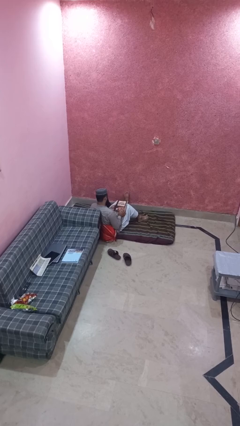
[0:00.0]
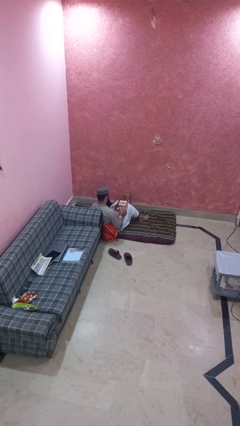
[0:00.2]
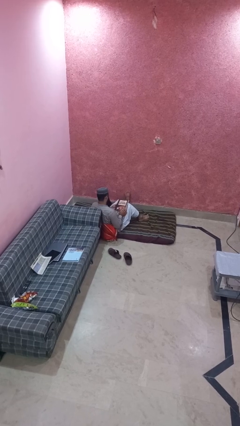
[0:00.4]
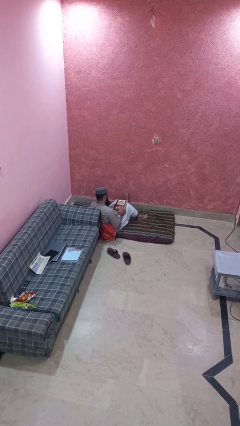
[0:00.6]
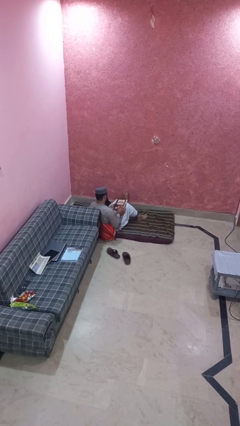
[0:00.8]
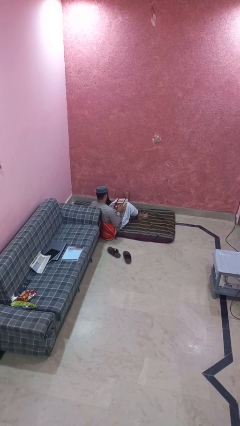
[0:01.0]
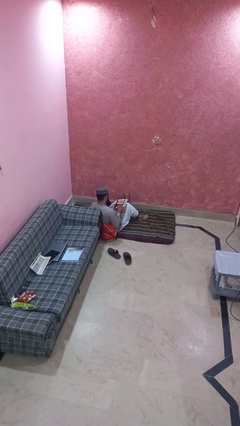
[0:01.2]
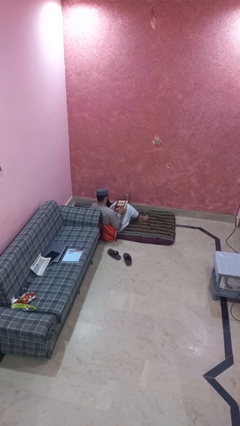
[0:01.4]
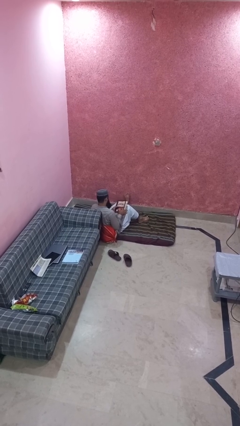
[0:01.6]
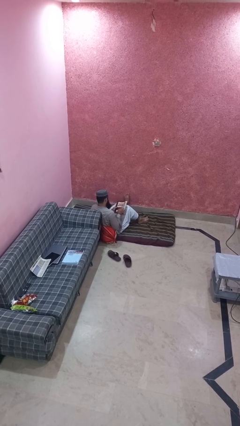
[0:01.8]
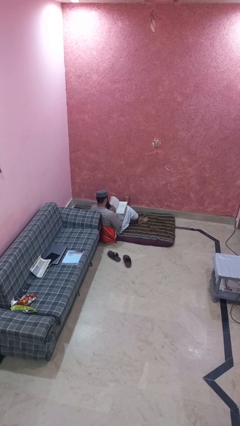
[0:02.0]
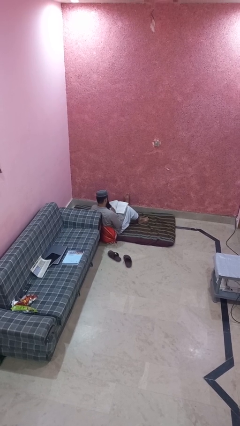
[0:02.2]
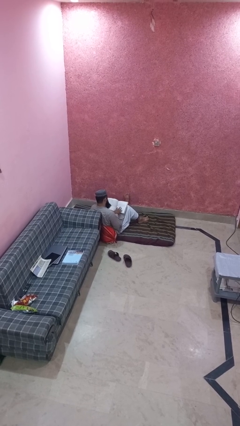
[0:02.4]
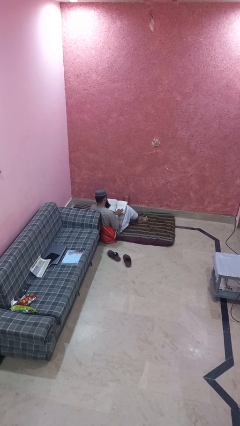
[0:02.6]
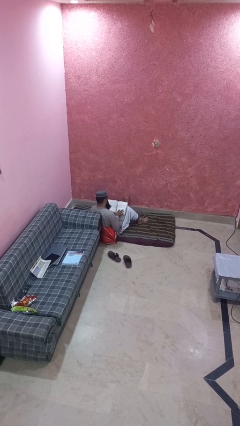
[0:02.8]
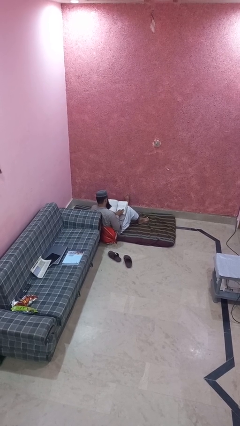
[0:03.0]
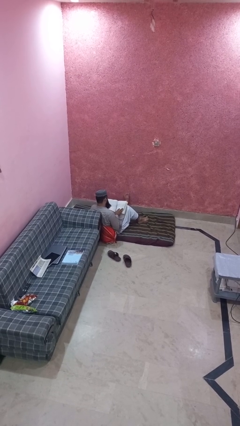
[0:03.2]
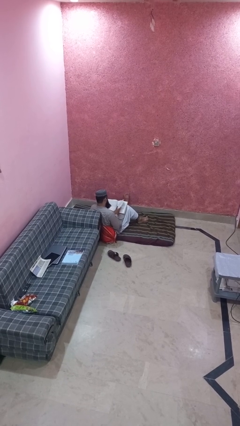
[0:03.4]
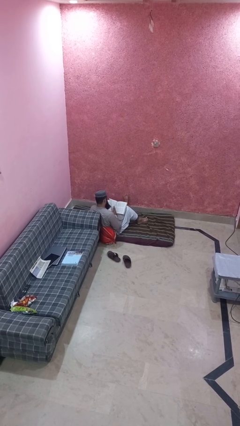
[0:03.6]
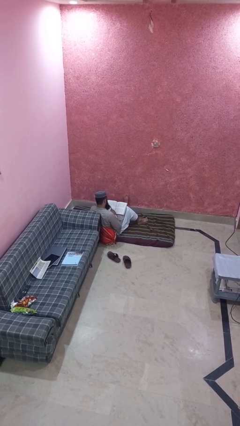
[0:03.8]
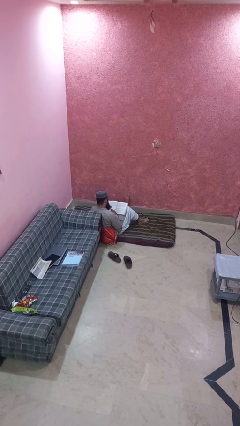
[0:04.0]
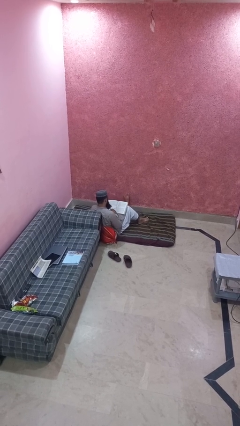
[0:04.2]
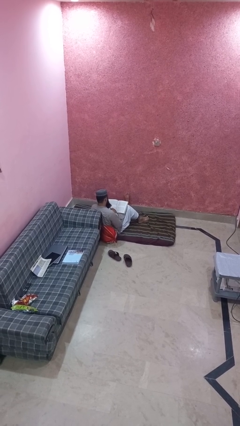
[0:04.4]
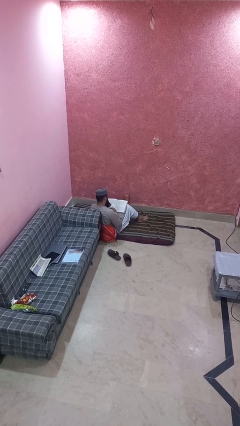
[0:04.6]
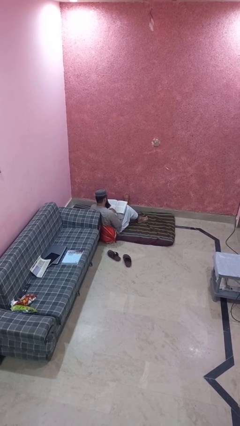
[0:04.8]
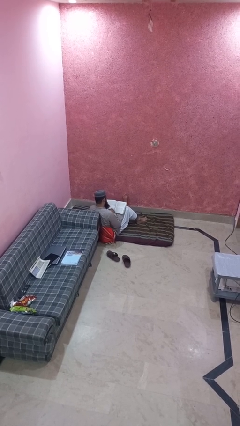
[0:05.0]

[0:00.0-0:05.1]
person reads book

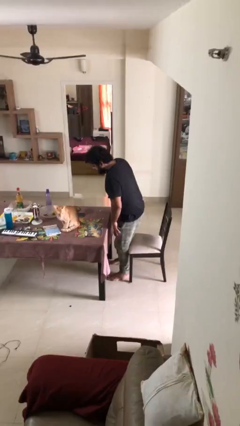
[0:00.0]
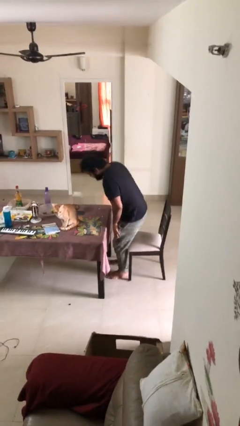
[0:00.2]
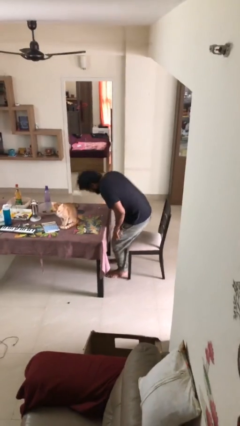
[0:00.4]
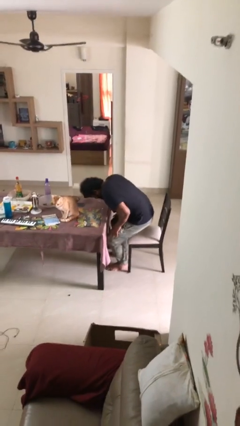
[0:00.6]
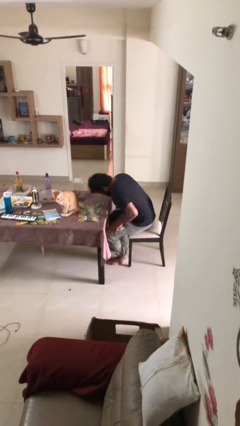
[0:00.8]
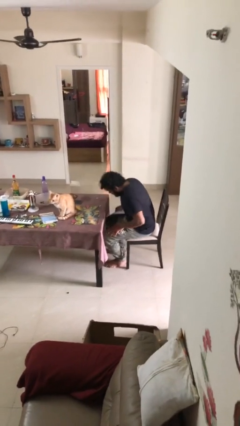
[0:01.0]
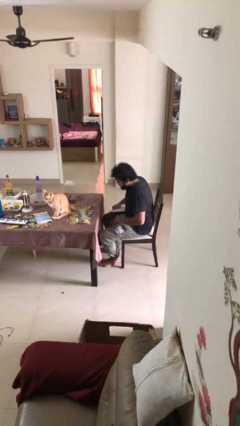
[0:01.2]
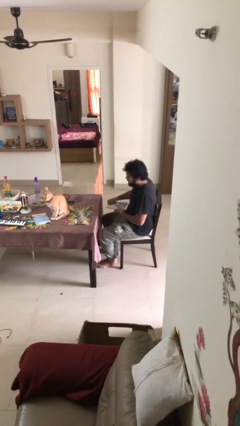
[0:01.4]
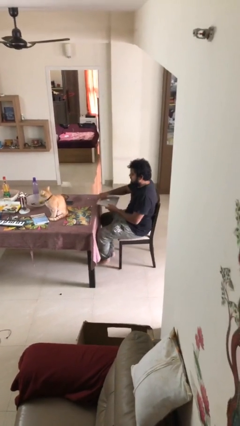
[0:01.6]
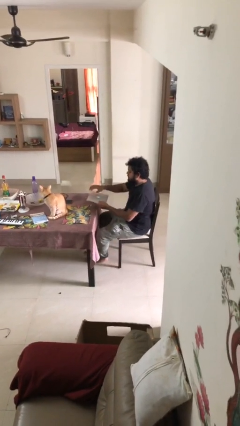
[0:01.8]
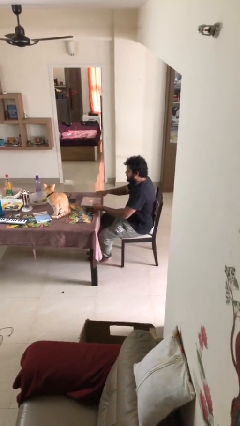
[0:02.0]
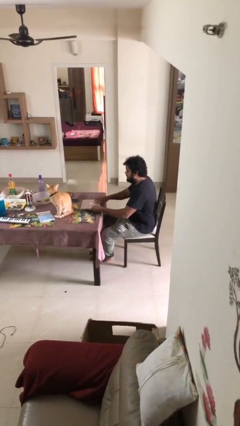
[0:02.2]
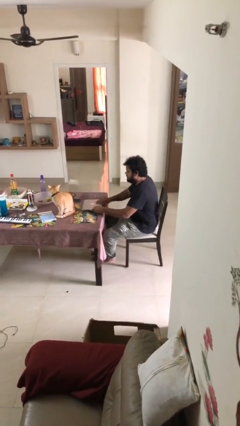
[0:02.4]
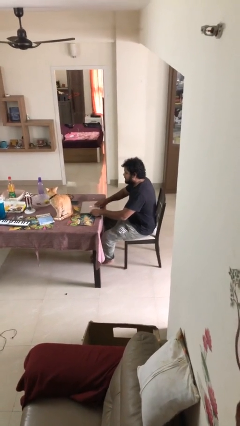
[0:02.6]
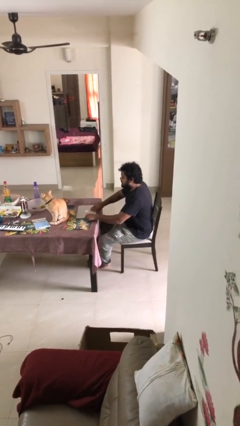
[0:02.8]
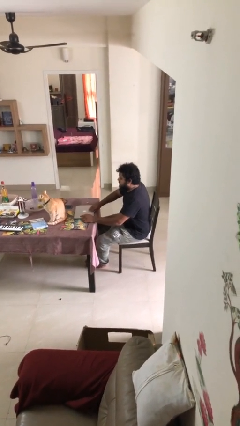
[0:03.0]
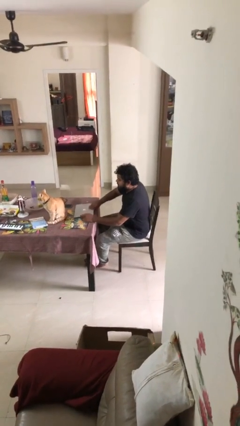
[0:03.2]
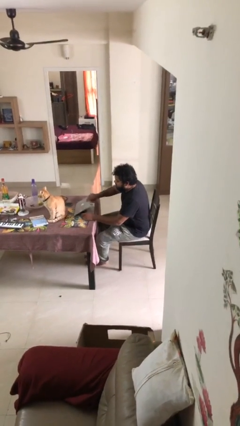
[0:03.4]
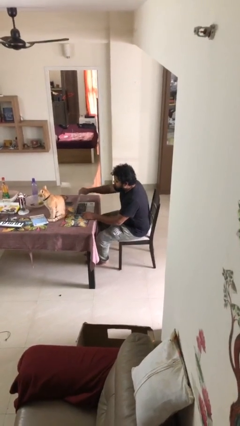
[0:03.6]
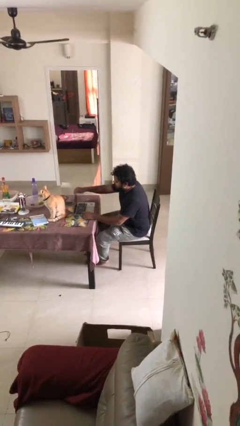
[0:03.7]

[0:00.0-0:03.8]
person sits down

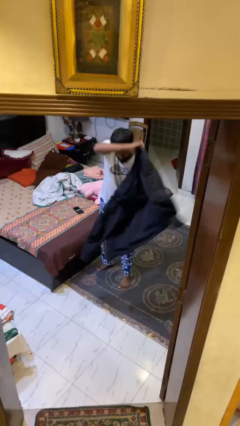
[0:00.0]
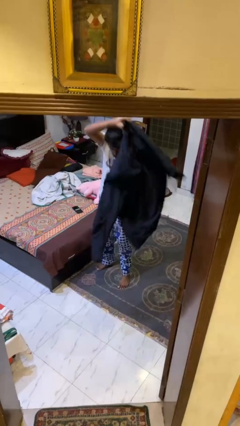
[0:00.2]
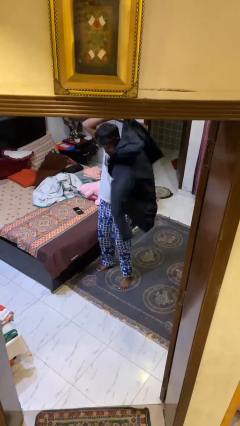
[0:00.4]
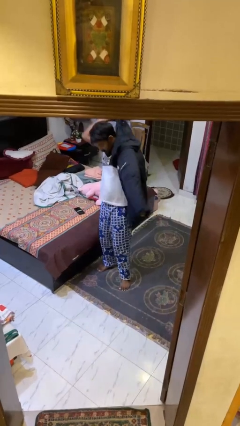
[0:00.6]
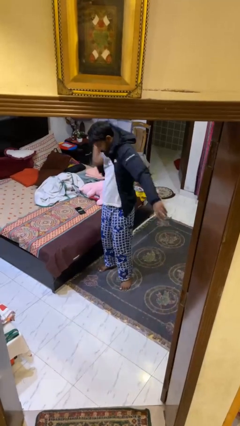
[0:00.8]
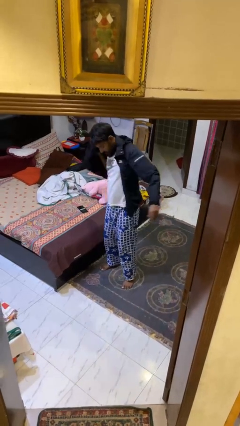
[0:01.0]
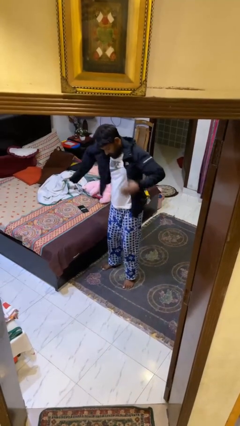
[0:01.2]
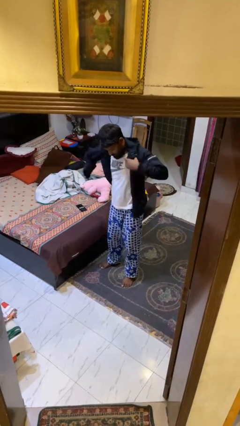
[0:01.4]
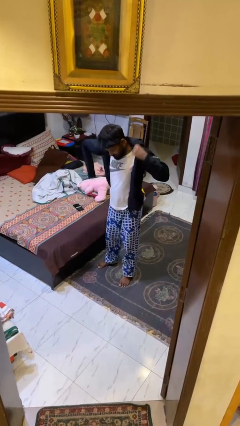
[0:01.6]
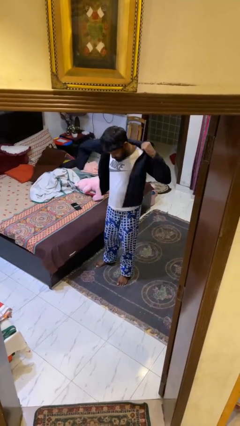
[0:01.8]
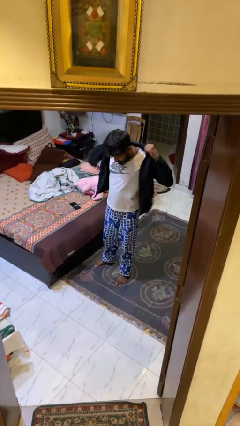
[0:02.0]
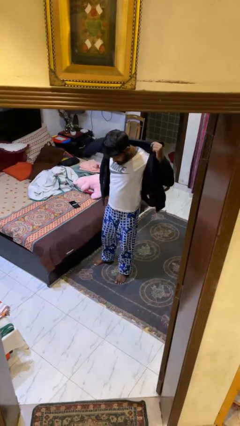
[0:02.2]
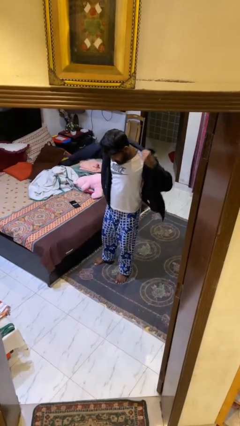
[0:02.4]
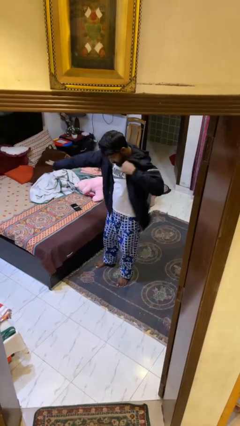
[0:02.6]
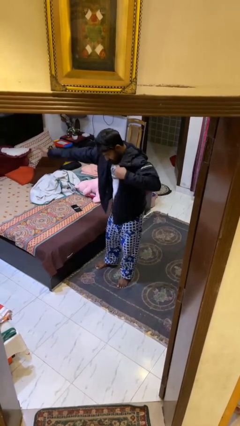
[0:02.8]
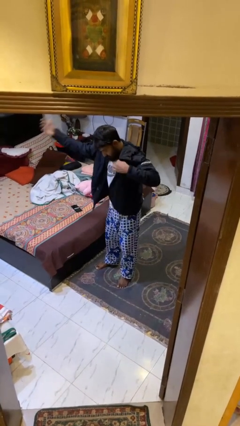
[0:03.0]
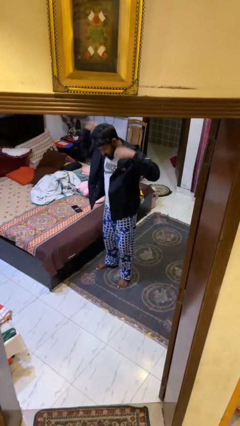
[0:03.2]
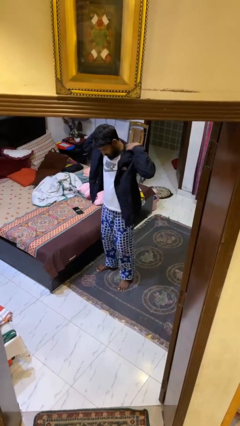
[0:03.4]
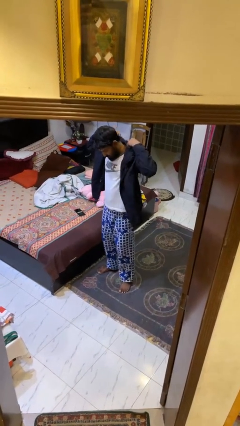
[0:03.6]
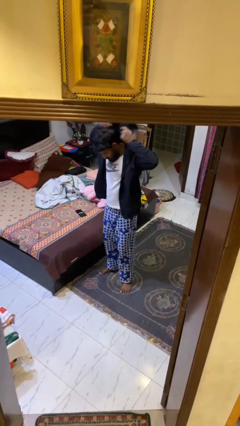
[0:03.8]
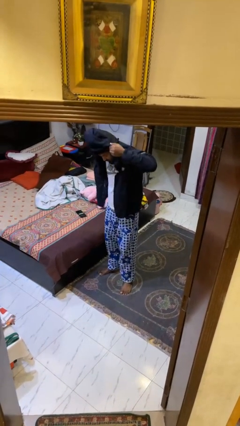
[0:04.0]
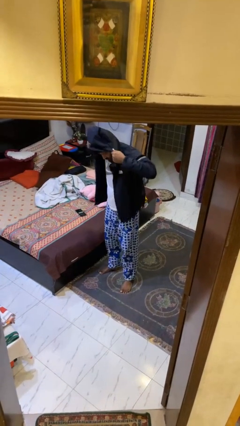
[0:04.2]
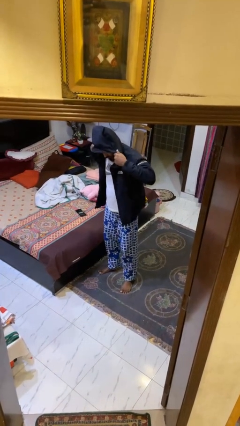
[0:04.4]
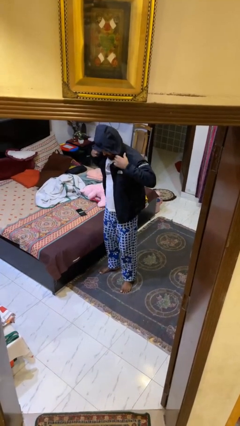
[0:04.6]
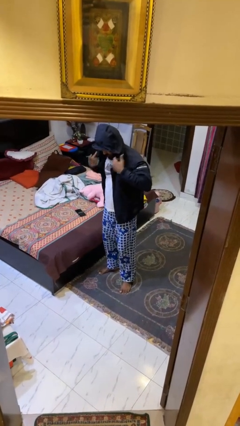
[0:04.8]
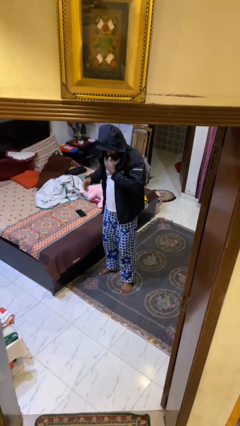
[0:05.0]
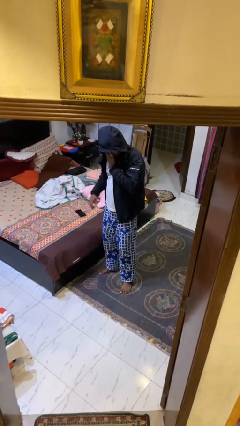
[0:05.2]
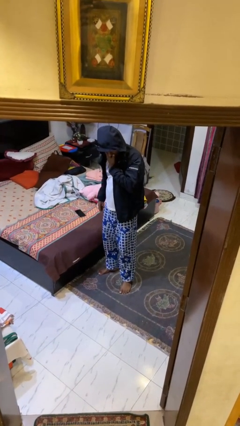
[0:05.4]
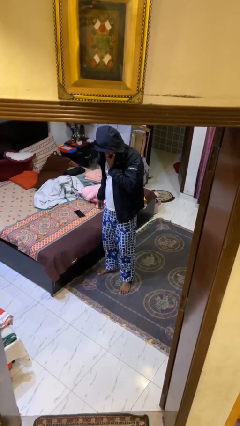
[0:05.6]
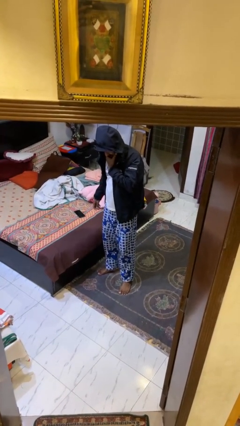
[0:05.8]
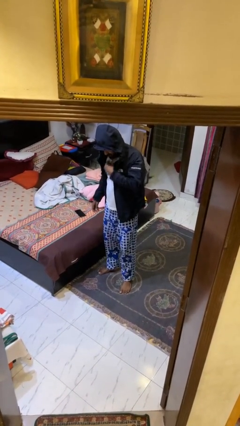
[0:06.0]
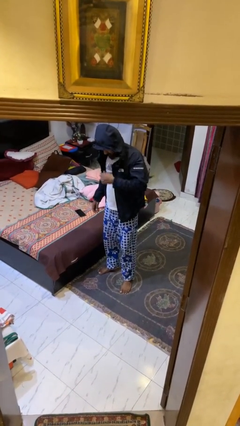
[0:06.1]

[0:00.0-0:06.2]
person puts on hoodie

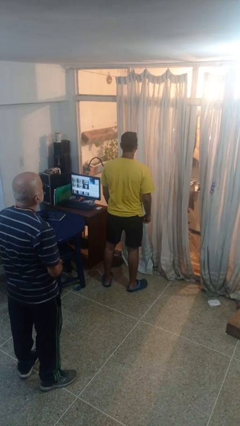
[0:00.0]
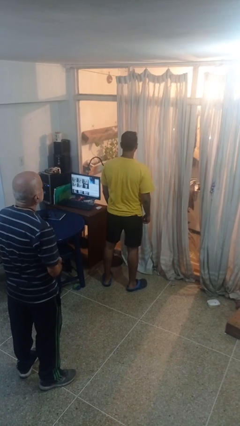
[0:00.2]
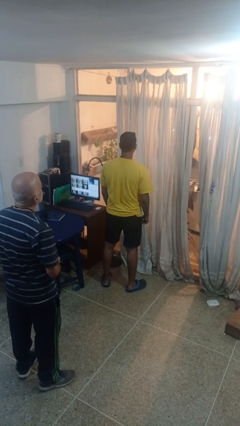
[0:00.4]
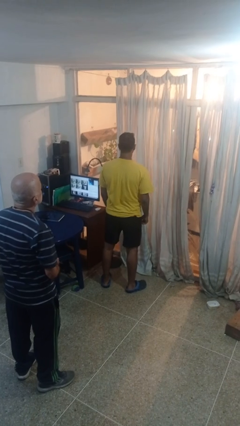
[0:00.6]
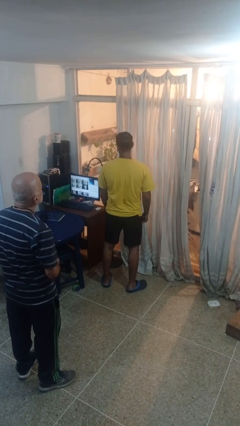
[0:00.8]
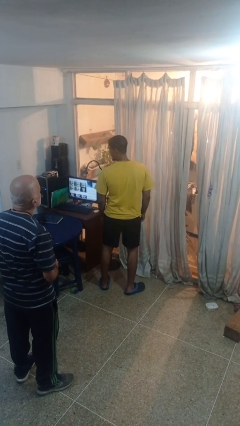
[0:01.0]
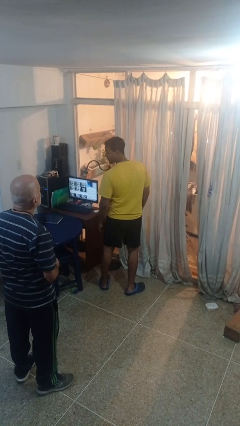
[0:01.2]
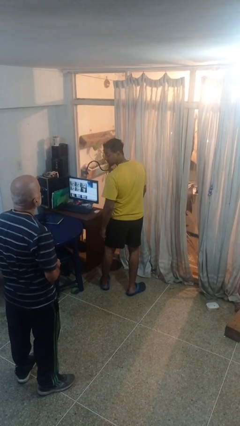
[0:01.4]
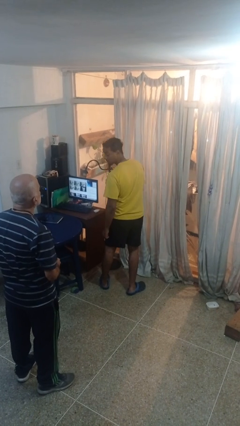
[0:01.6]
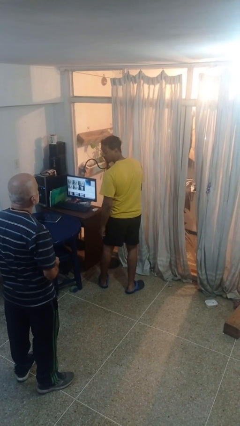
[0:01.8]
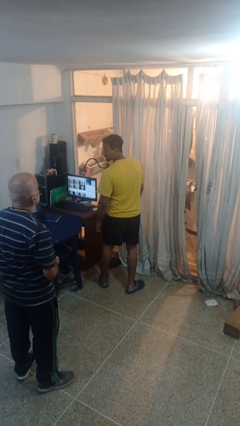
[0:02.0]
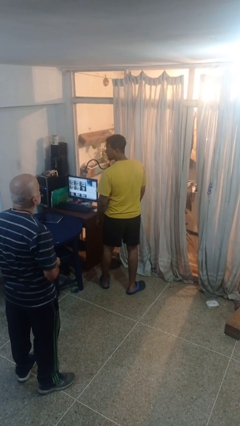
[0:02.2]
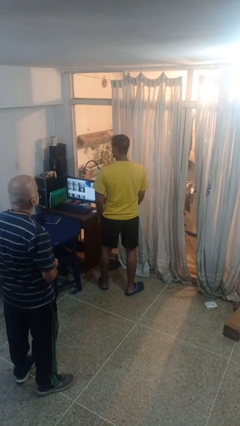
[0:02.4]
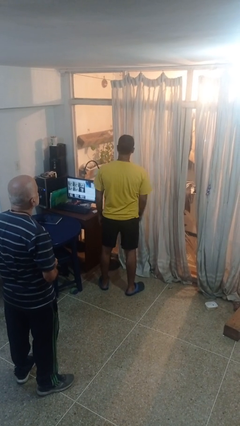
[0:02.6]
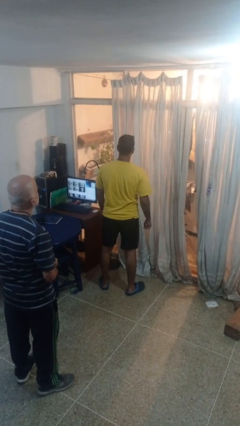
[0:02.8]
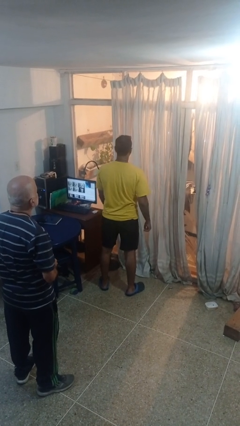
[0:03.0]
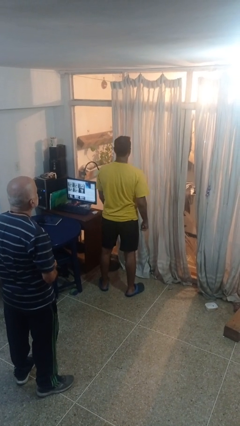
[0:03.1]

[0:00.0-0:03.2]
person looks over shoulder
